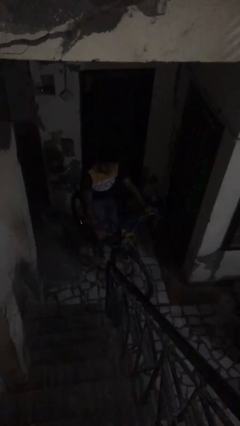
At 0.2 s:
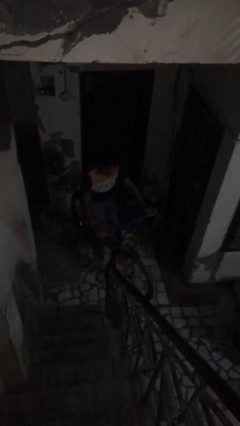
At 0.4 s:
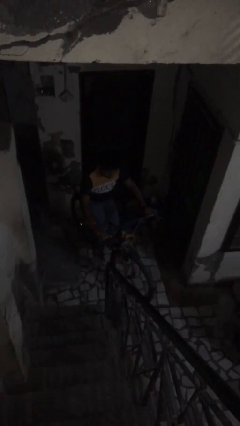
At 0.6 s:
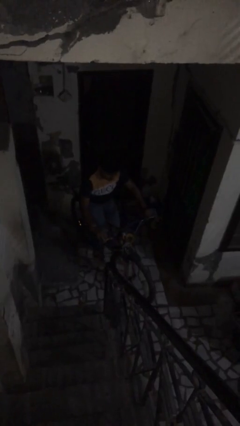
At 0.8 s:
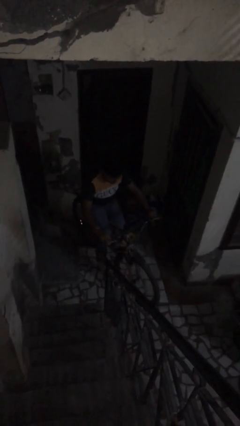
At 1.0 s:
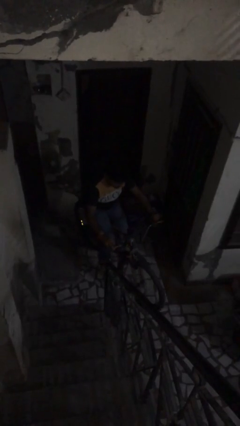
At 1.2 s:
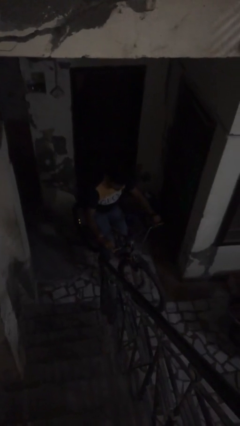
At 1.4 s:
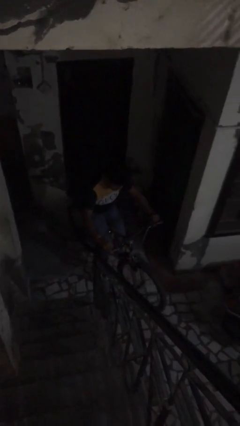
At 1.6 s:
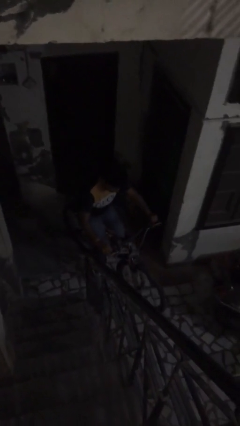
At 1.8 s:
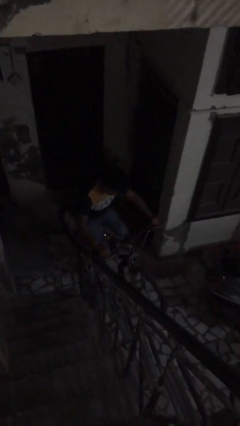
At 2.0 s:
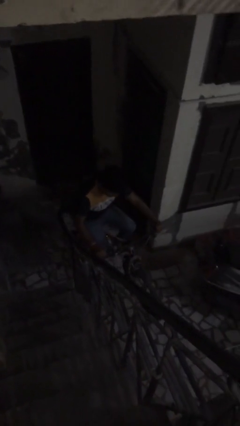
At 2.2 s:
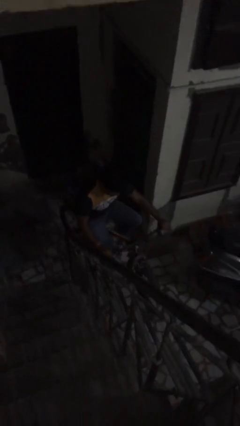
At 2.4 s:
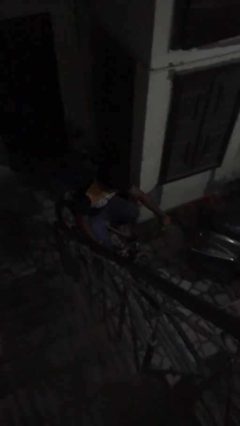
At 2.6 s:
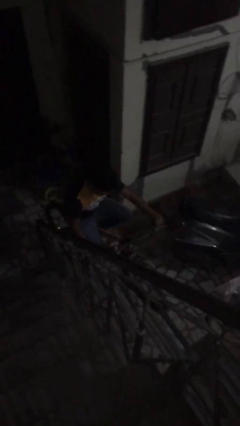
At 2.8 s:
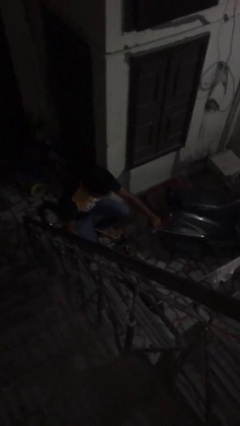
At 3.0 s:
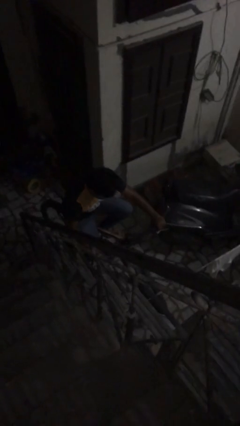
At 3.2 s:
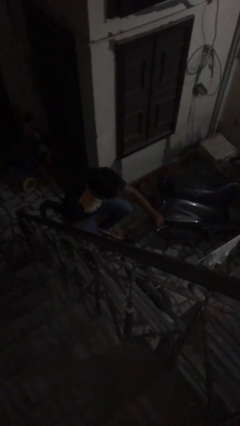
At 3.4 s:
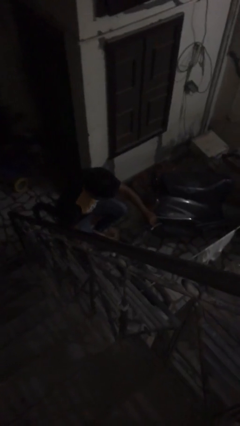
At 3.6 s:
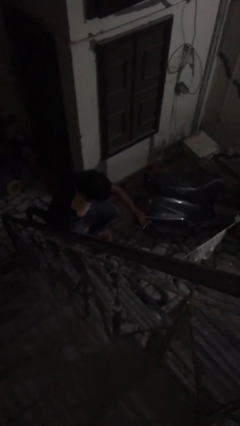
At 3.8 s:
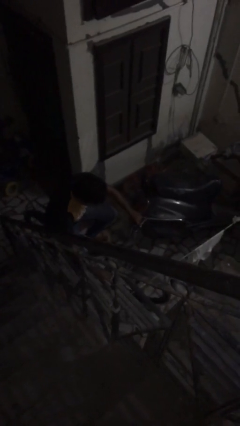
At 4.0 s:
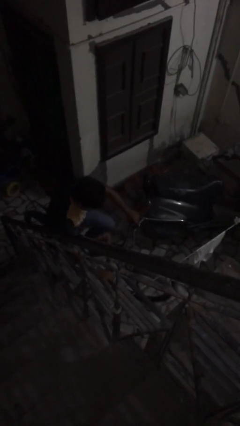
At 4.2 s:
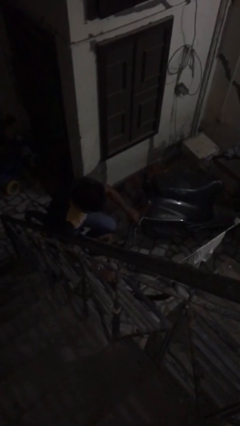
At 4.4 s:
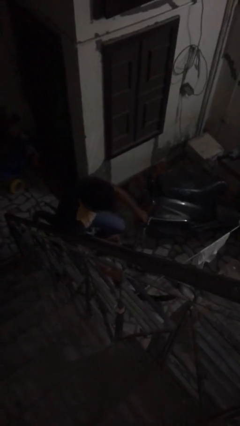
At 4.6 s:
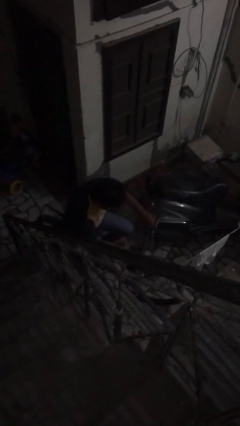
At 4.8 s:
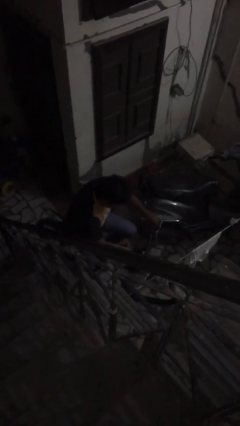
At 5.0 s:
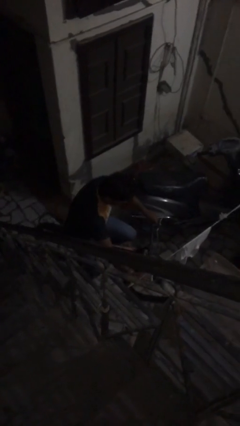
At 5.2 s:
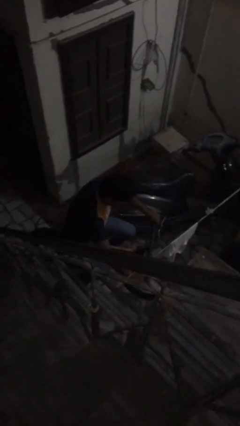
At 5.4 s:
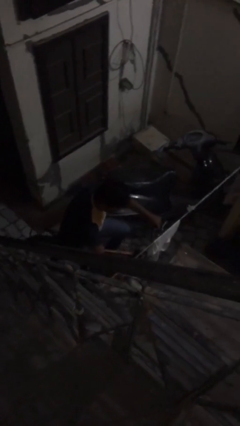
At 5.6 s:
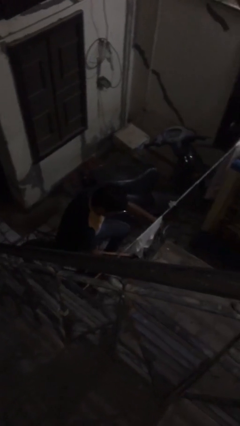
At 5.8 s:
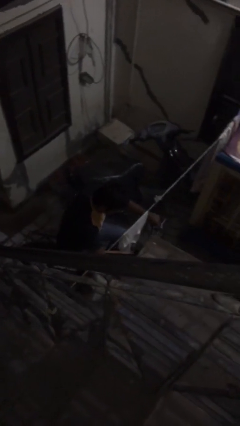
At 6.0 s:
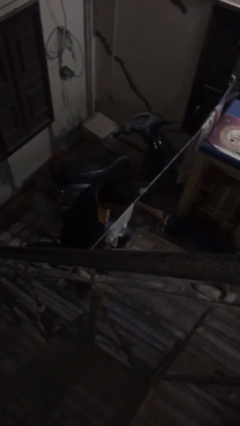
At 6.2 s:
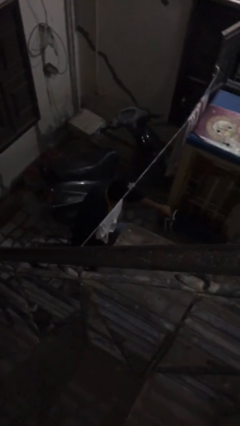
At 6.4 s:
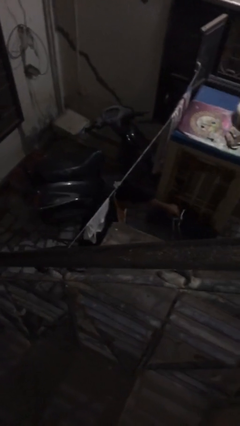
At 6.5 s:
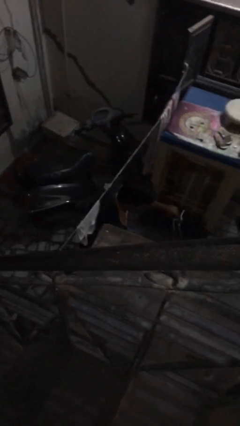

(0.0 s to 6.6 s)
person rides bicycle

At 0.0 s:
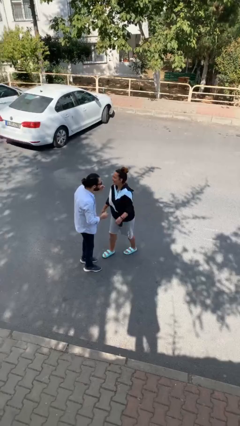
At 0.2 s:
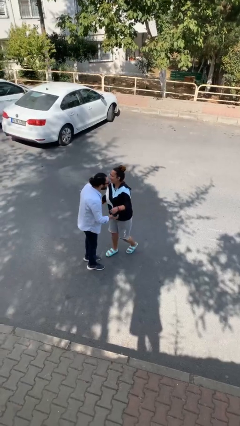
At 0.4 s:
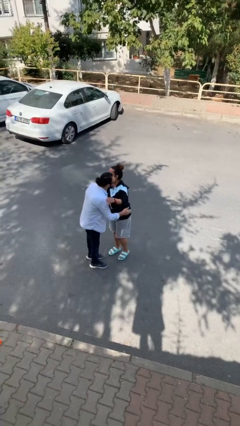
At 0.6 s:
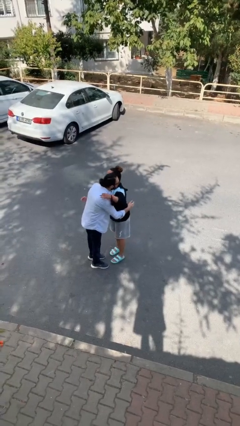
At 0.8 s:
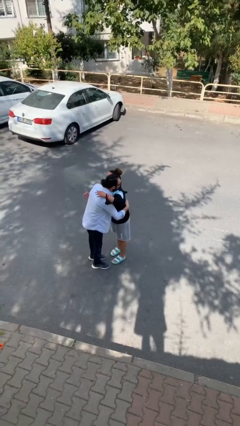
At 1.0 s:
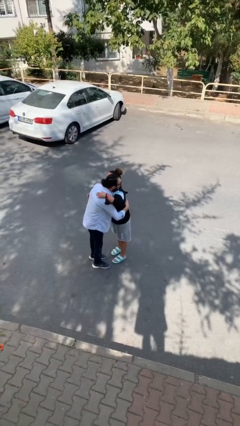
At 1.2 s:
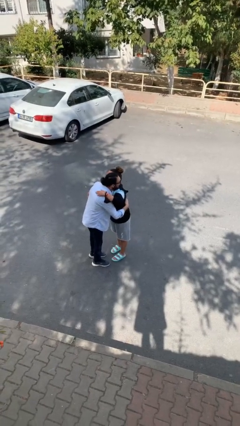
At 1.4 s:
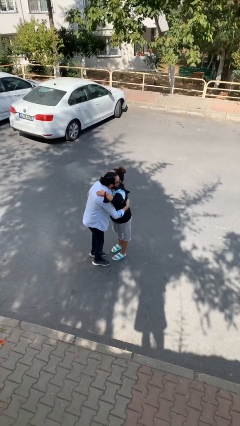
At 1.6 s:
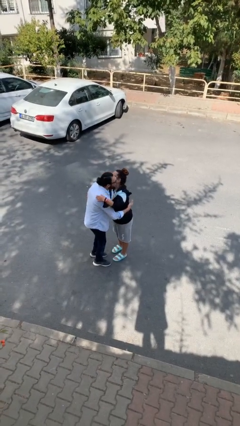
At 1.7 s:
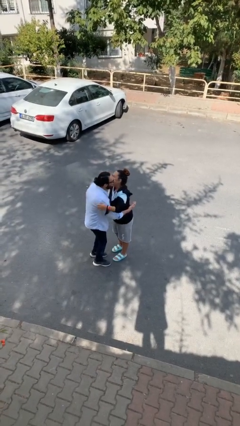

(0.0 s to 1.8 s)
person embraces person

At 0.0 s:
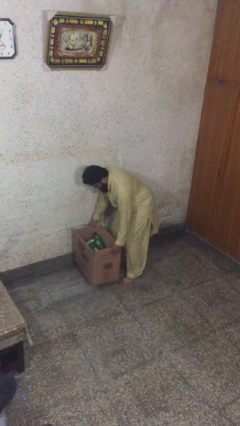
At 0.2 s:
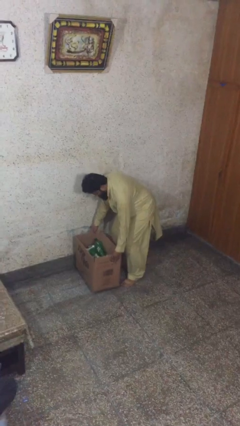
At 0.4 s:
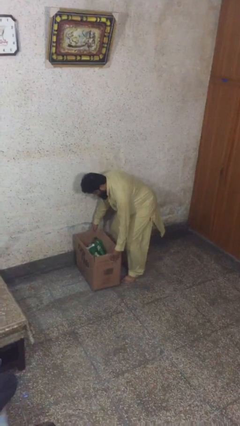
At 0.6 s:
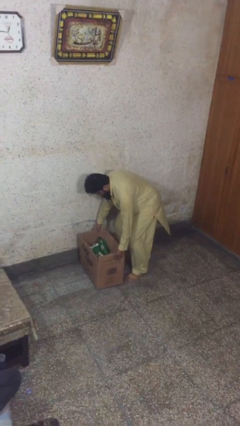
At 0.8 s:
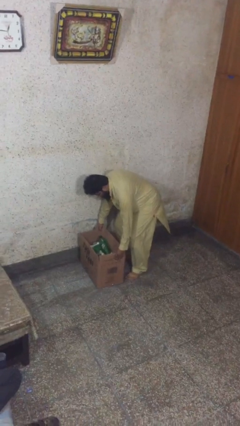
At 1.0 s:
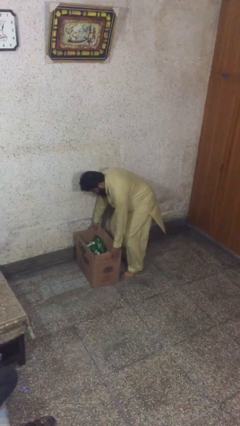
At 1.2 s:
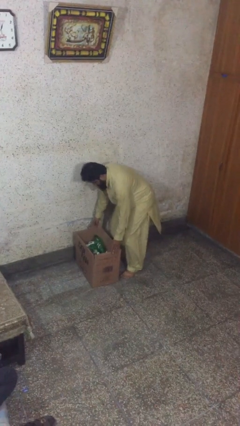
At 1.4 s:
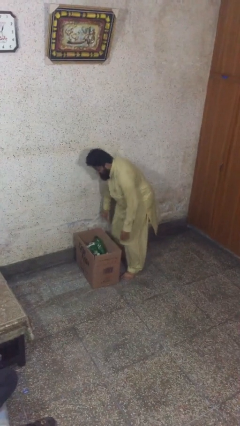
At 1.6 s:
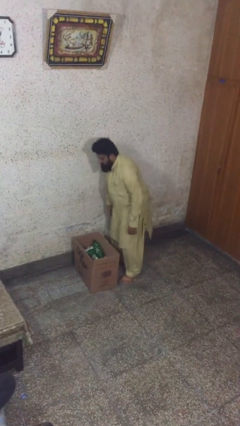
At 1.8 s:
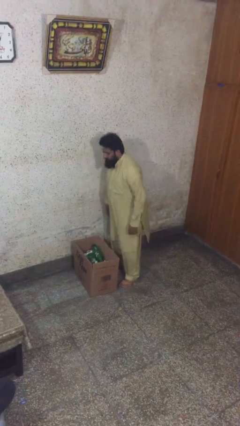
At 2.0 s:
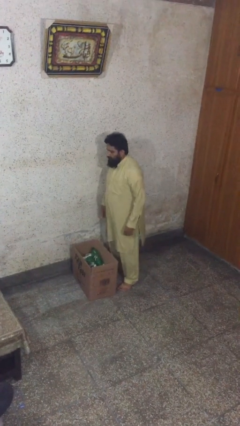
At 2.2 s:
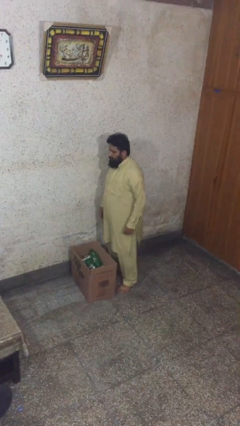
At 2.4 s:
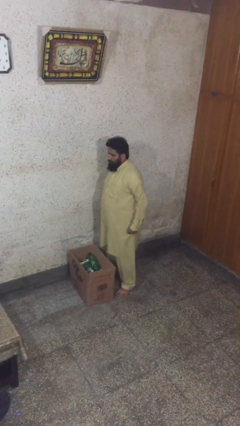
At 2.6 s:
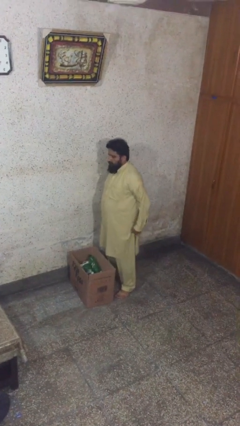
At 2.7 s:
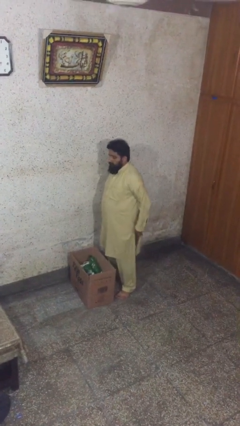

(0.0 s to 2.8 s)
person puts down object on floor

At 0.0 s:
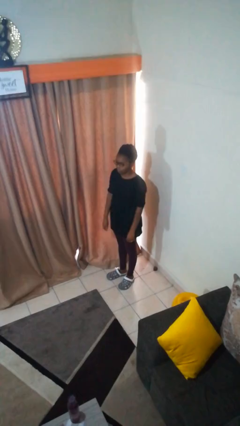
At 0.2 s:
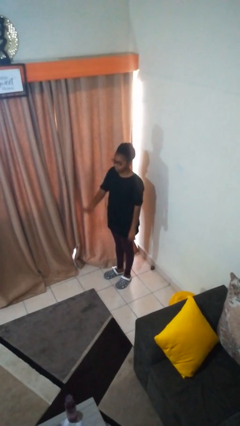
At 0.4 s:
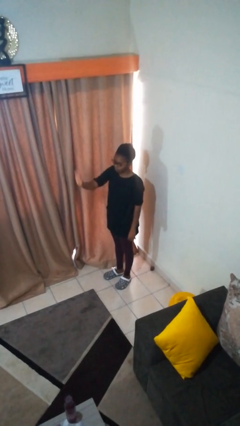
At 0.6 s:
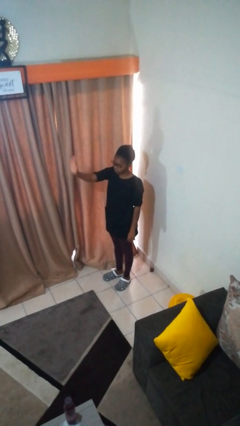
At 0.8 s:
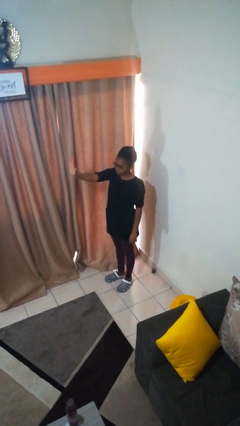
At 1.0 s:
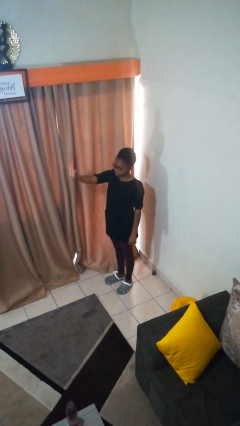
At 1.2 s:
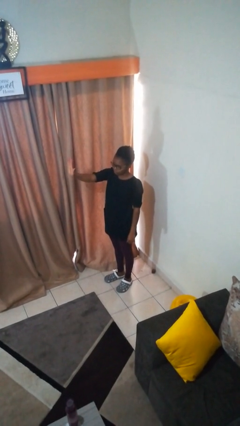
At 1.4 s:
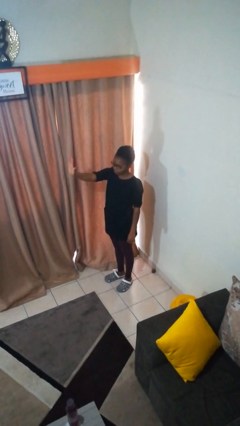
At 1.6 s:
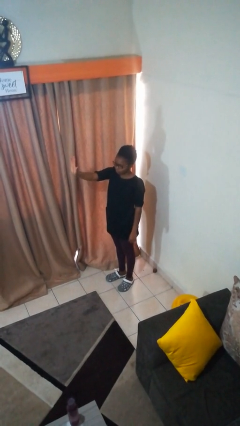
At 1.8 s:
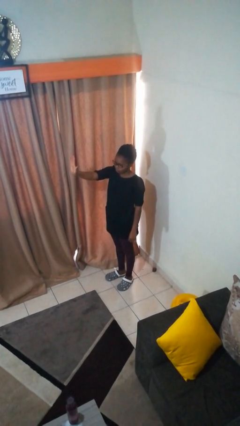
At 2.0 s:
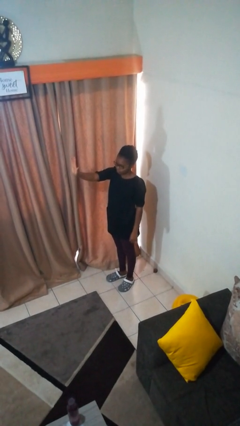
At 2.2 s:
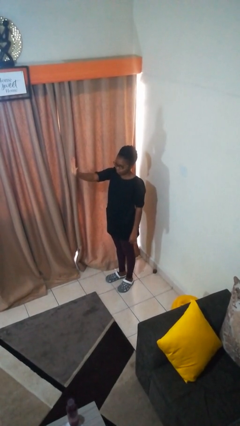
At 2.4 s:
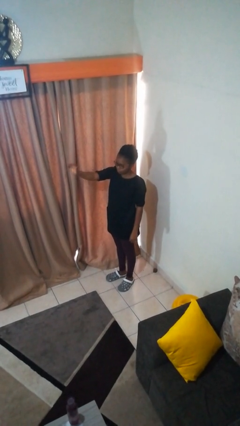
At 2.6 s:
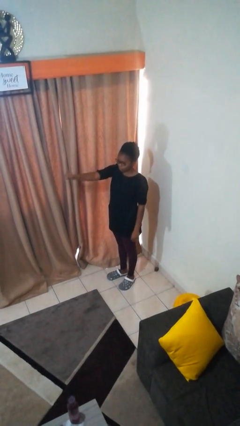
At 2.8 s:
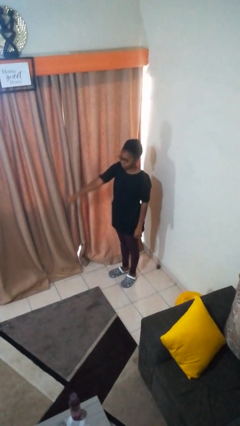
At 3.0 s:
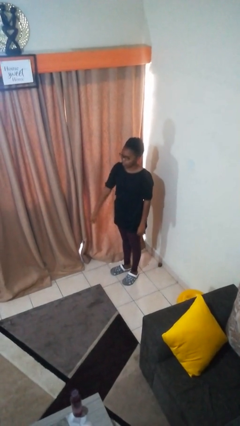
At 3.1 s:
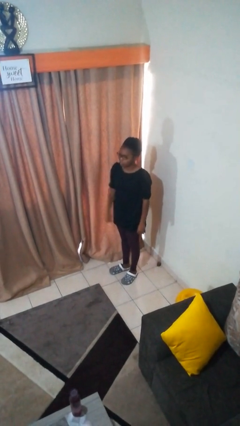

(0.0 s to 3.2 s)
person gestures stop

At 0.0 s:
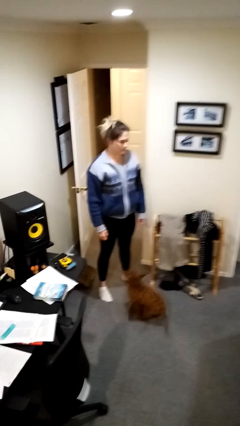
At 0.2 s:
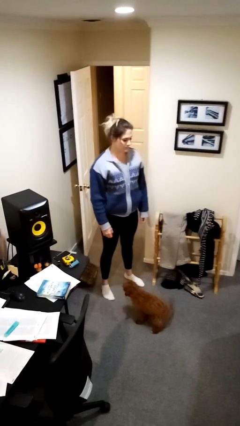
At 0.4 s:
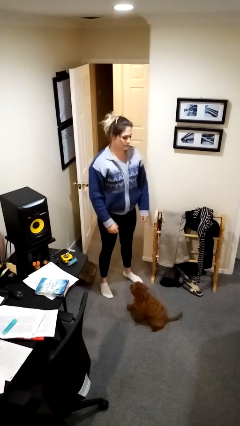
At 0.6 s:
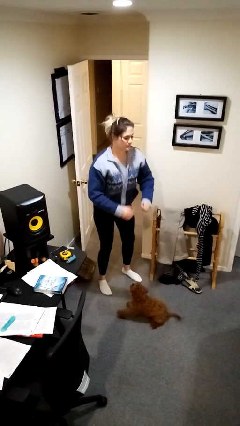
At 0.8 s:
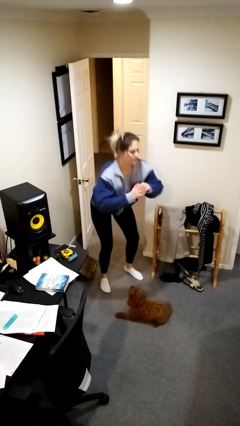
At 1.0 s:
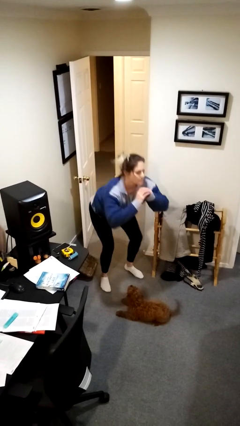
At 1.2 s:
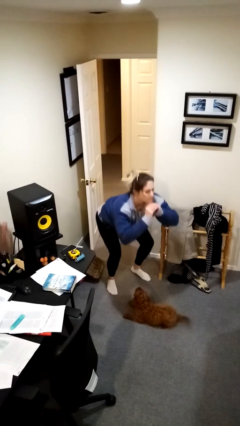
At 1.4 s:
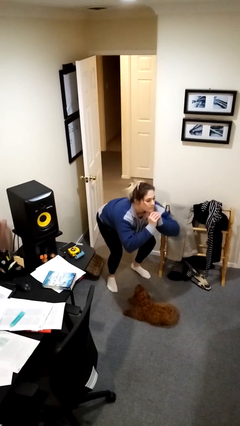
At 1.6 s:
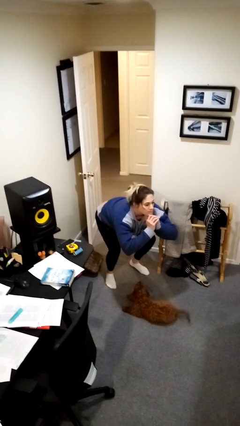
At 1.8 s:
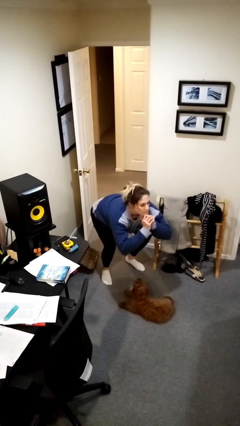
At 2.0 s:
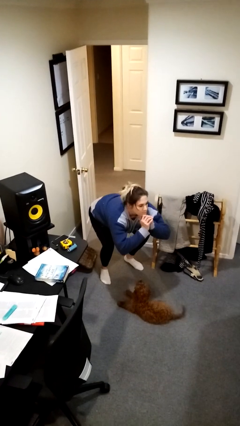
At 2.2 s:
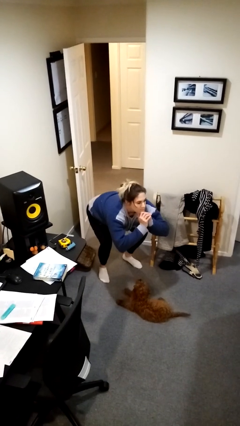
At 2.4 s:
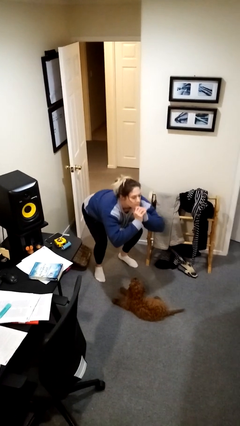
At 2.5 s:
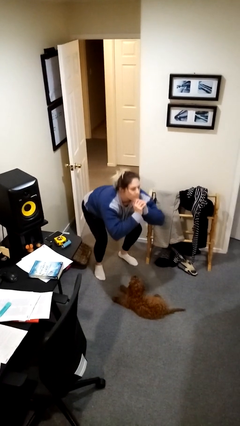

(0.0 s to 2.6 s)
person squats

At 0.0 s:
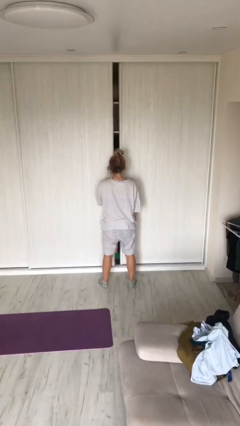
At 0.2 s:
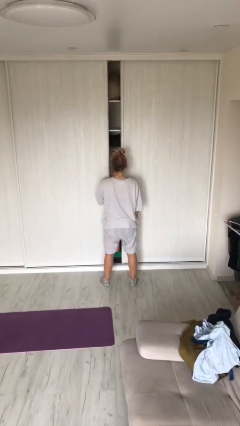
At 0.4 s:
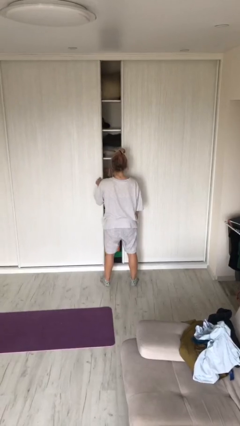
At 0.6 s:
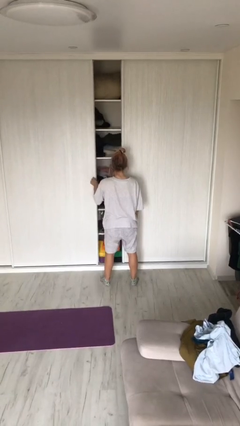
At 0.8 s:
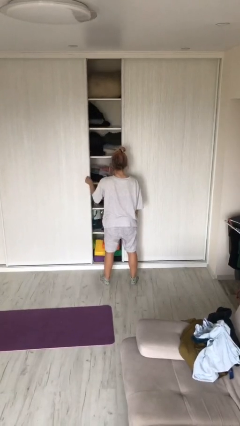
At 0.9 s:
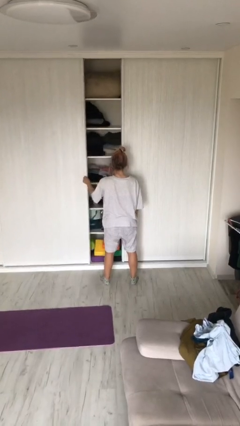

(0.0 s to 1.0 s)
person opens sliding door
